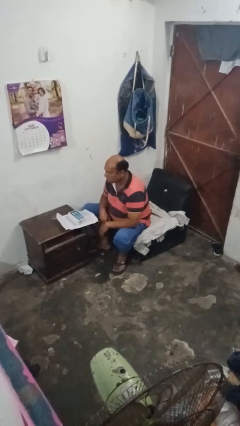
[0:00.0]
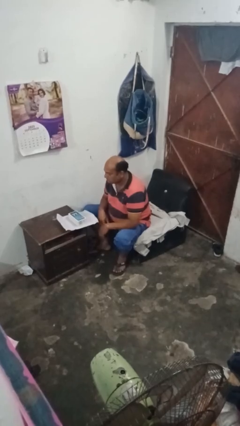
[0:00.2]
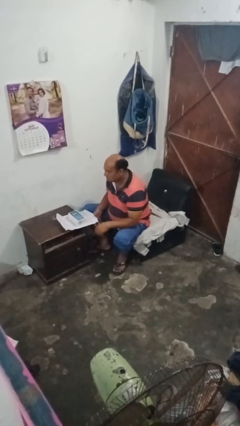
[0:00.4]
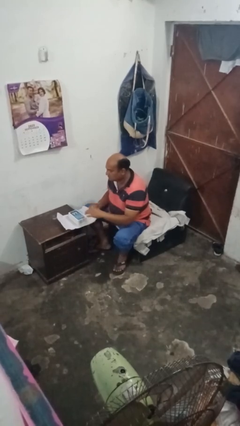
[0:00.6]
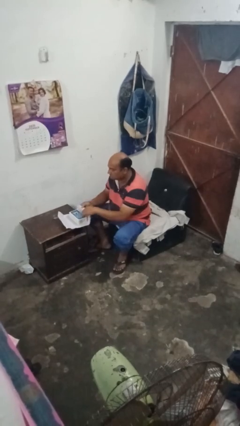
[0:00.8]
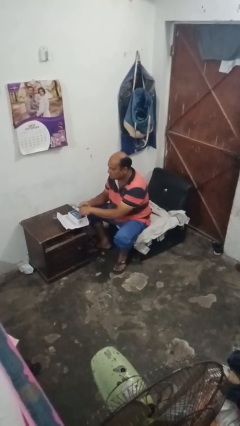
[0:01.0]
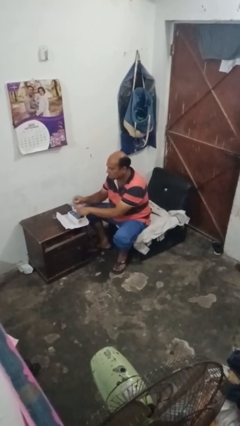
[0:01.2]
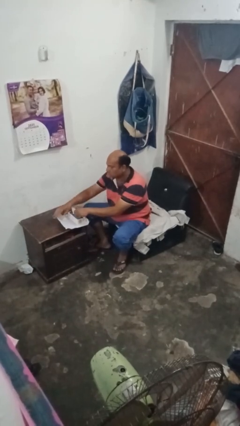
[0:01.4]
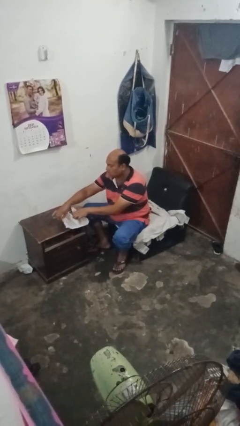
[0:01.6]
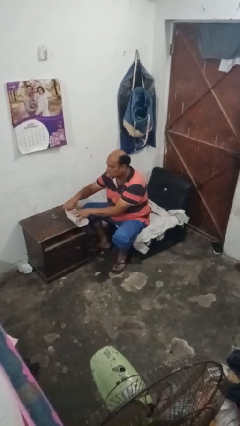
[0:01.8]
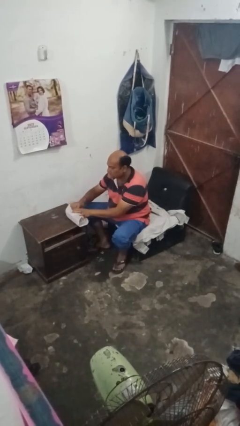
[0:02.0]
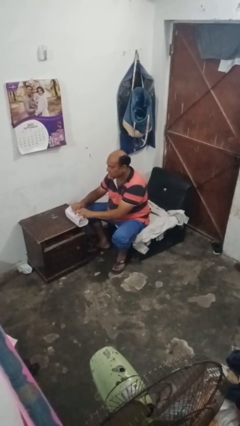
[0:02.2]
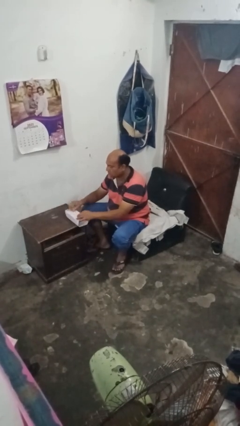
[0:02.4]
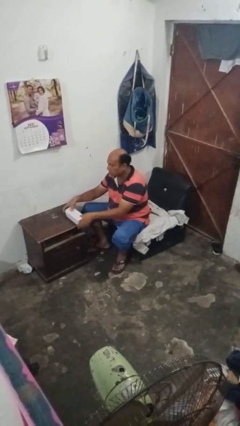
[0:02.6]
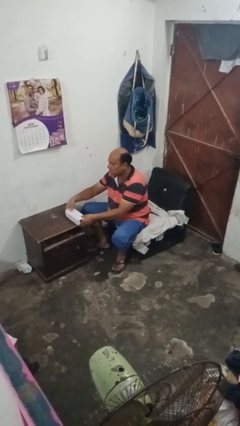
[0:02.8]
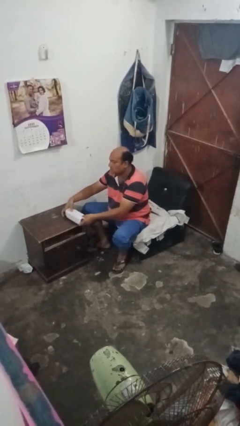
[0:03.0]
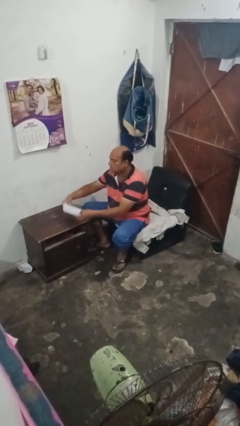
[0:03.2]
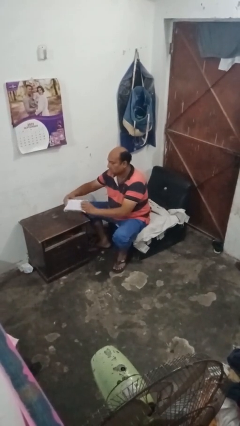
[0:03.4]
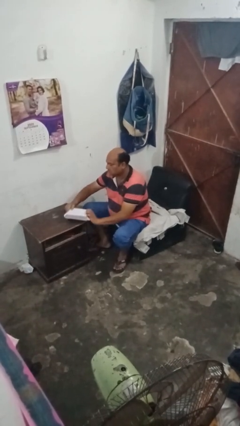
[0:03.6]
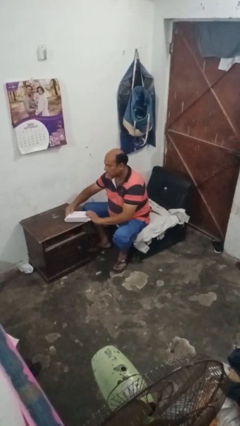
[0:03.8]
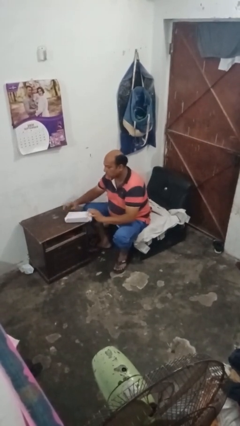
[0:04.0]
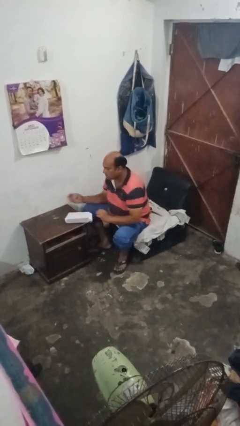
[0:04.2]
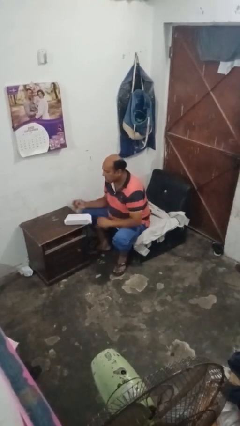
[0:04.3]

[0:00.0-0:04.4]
person wraps box

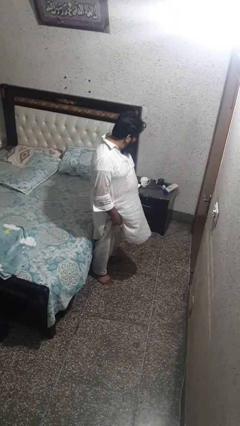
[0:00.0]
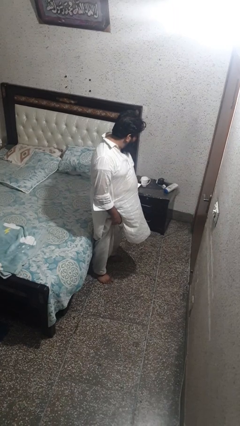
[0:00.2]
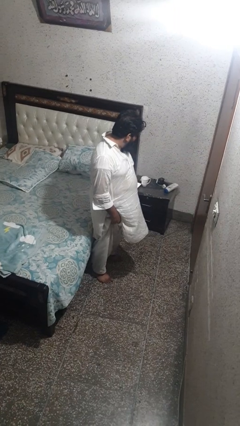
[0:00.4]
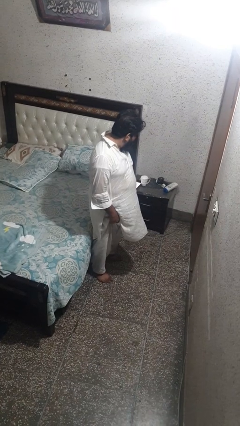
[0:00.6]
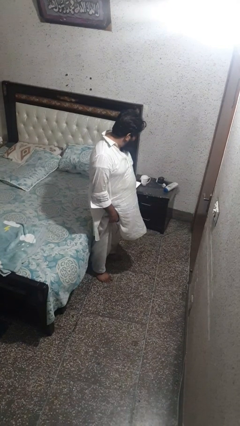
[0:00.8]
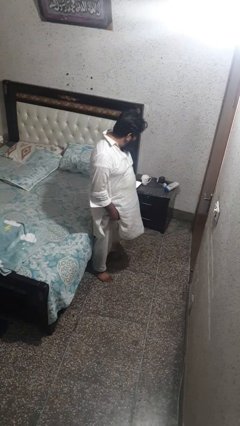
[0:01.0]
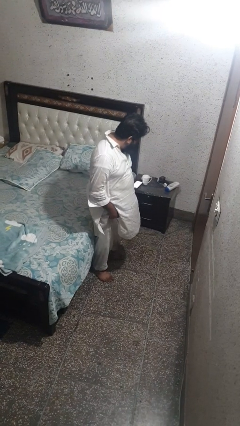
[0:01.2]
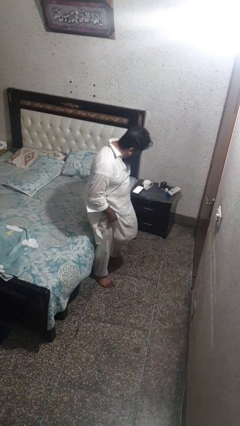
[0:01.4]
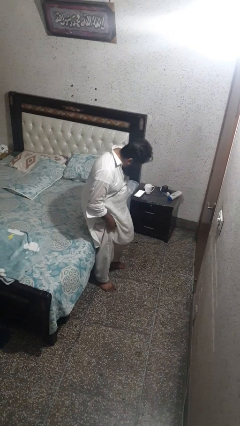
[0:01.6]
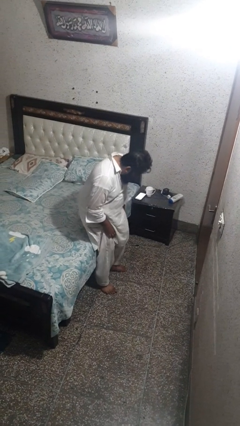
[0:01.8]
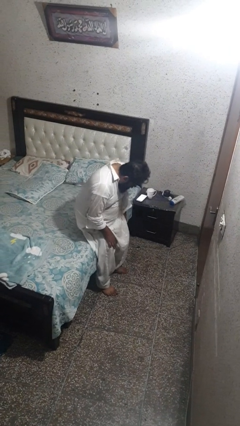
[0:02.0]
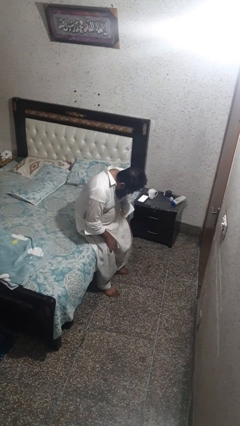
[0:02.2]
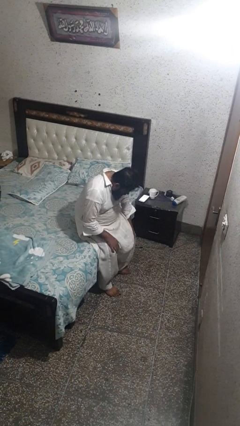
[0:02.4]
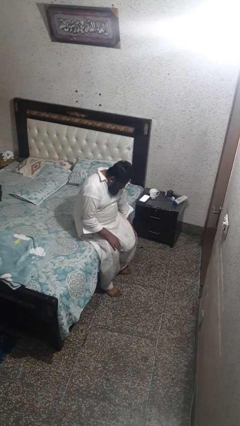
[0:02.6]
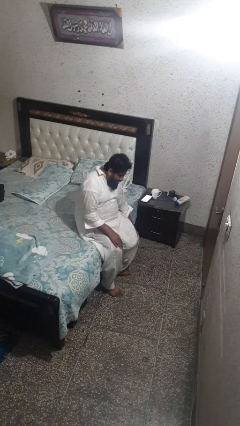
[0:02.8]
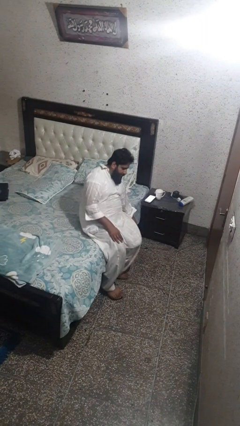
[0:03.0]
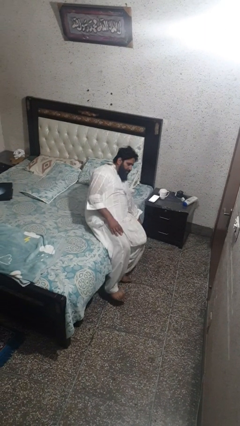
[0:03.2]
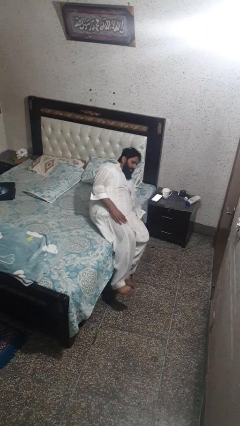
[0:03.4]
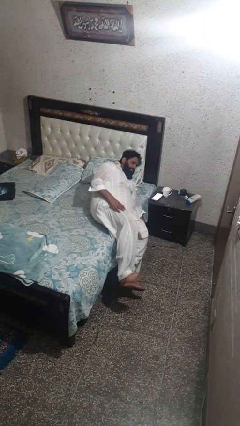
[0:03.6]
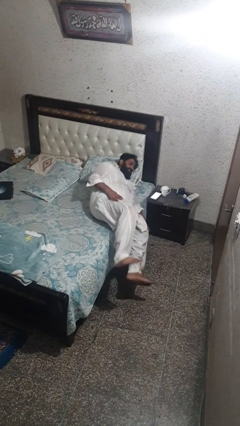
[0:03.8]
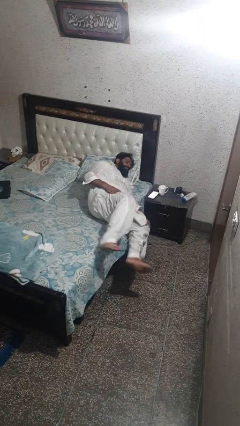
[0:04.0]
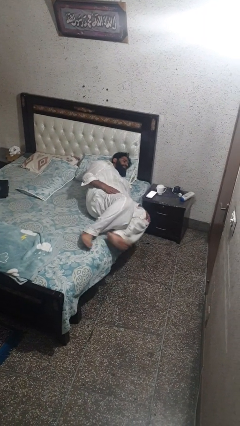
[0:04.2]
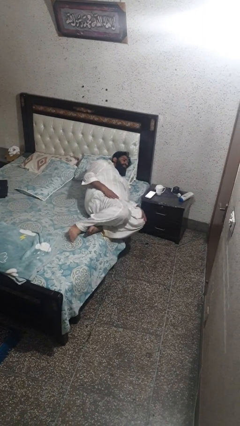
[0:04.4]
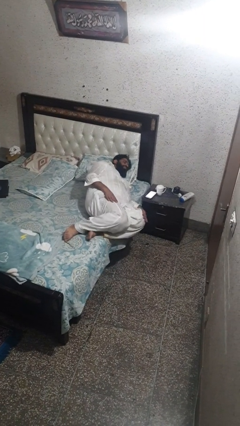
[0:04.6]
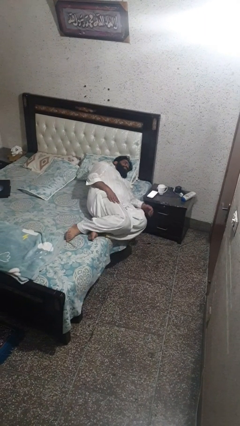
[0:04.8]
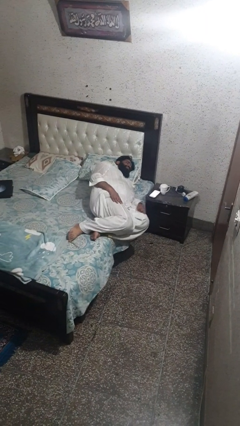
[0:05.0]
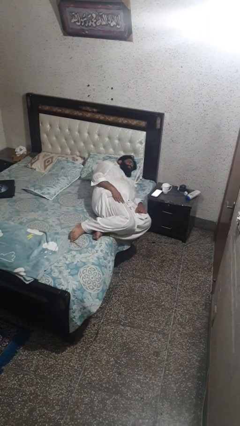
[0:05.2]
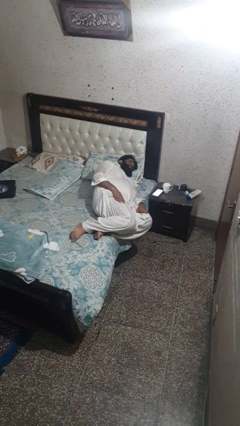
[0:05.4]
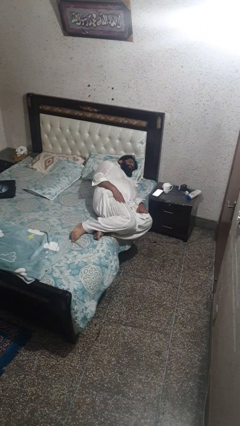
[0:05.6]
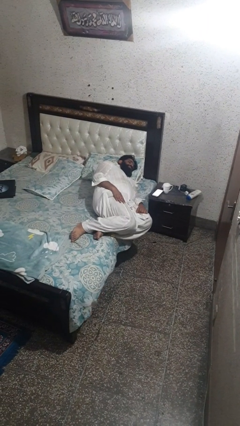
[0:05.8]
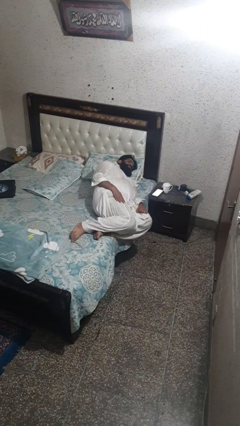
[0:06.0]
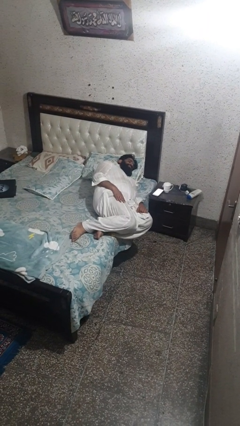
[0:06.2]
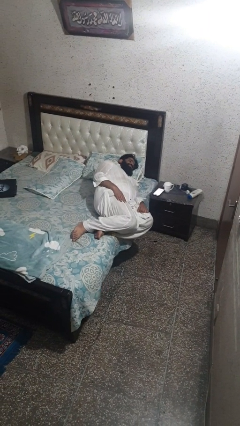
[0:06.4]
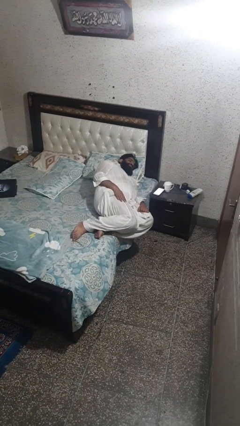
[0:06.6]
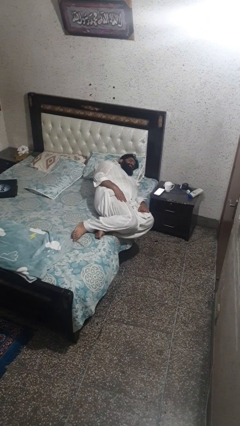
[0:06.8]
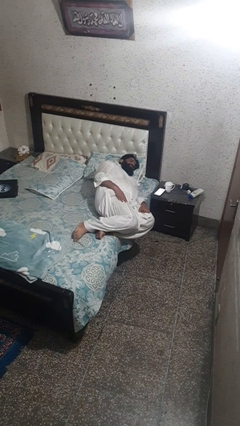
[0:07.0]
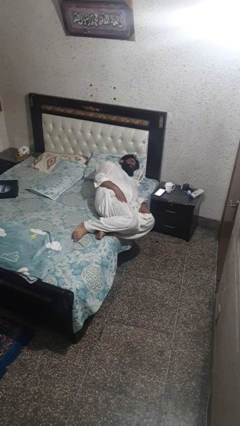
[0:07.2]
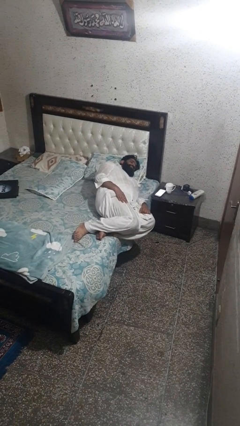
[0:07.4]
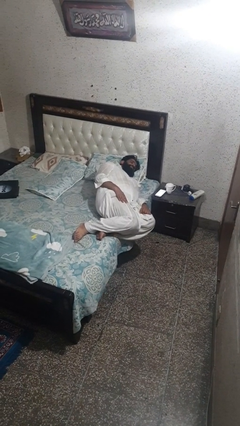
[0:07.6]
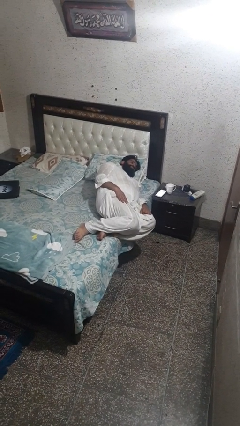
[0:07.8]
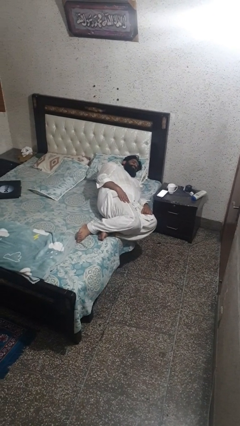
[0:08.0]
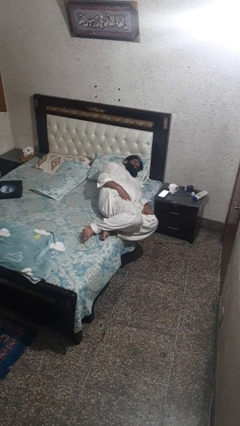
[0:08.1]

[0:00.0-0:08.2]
person lies down on bed

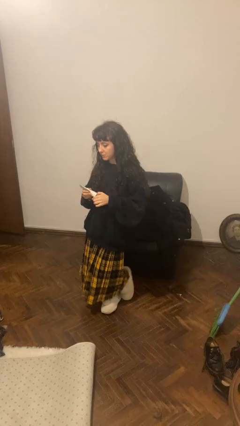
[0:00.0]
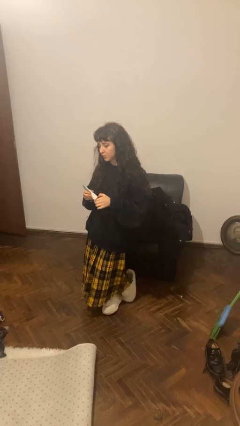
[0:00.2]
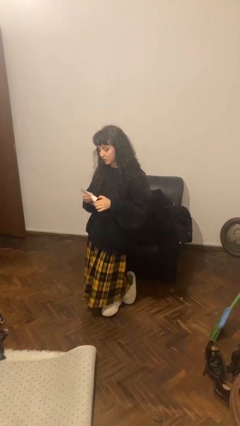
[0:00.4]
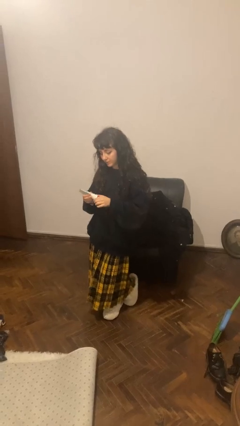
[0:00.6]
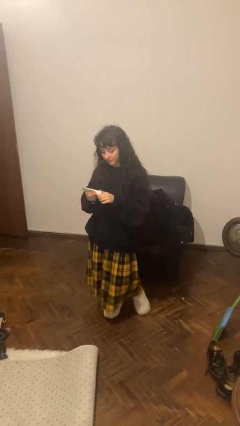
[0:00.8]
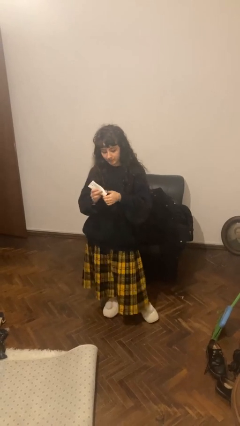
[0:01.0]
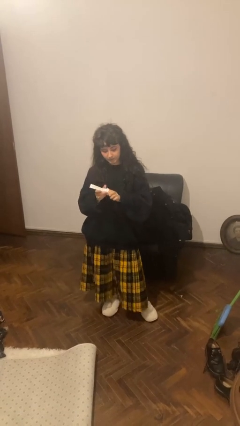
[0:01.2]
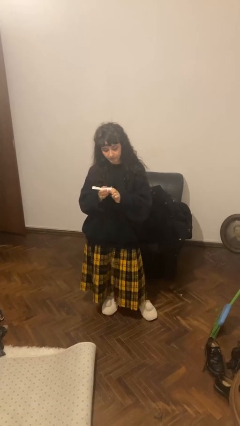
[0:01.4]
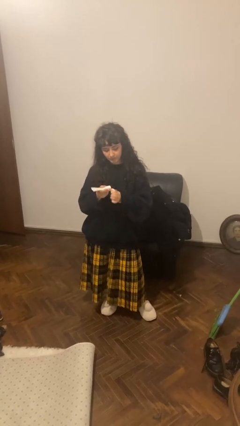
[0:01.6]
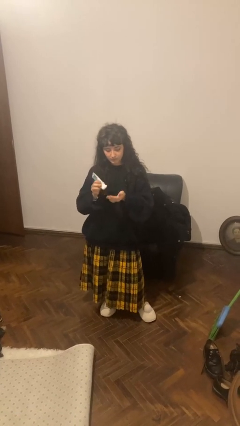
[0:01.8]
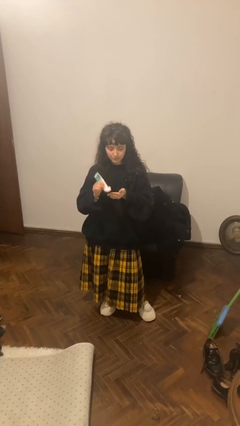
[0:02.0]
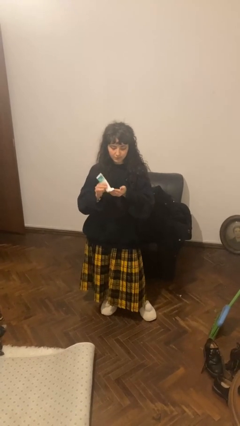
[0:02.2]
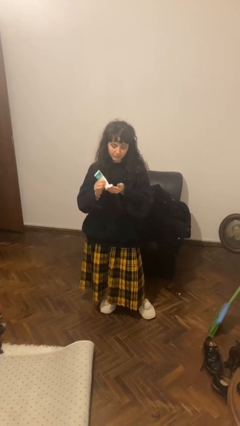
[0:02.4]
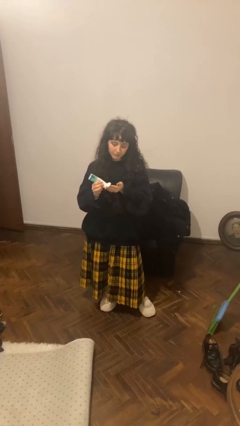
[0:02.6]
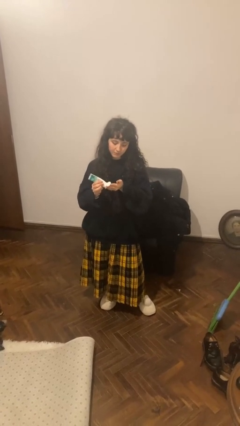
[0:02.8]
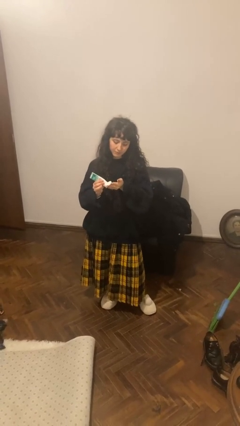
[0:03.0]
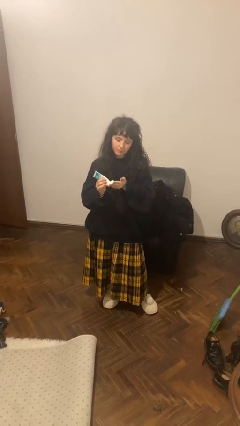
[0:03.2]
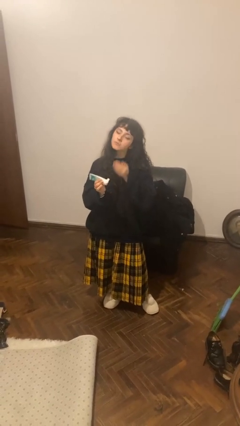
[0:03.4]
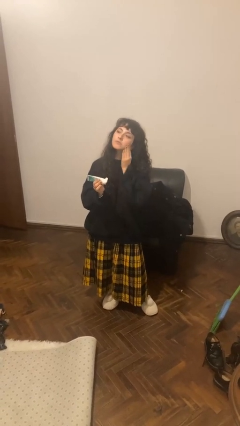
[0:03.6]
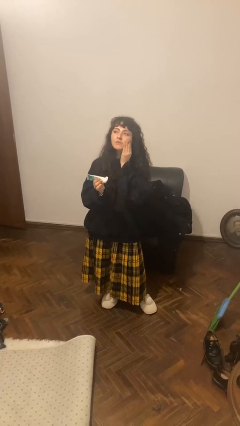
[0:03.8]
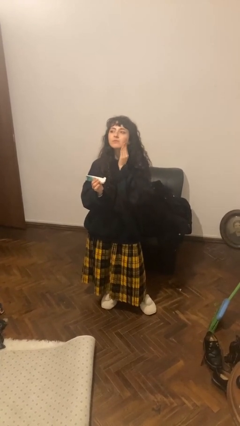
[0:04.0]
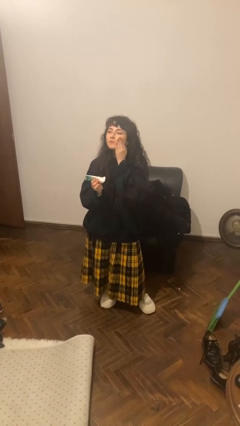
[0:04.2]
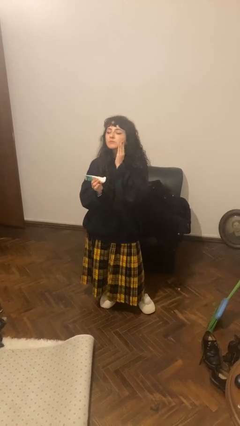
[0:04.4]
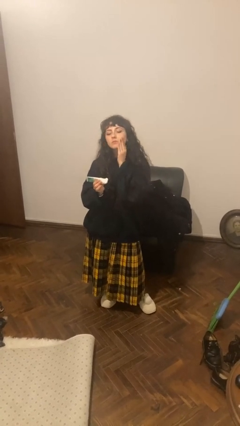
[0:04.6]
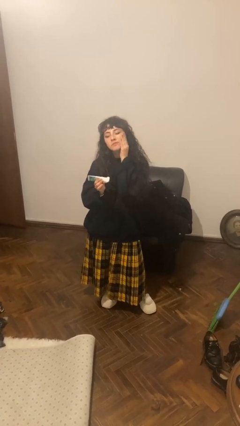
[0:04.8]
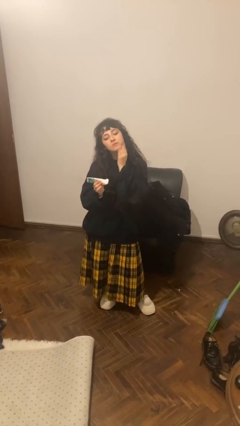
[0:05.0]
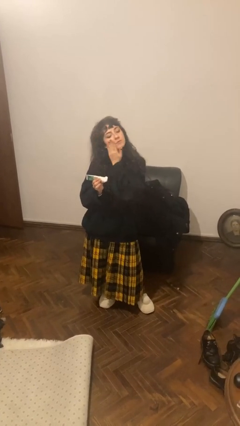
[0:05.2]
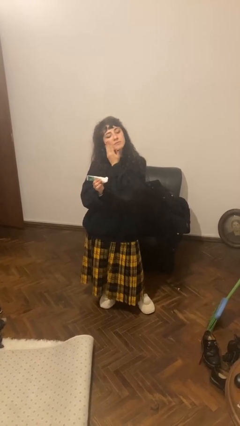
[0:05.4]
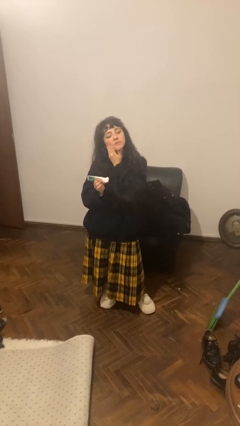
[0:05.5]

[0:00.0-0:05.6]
person applies facial moisturizer

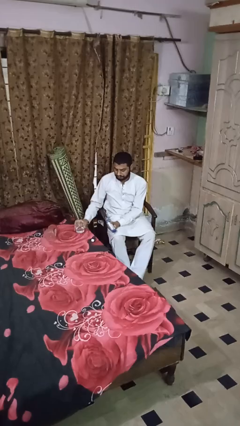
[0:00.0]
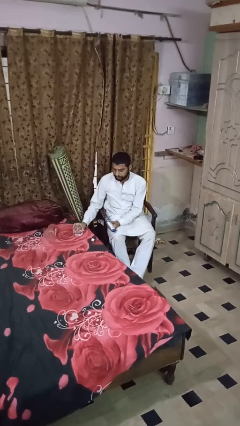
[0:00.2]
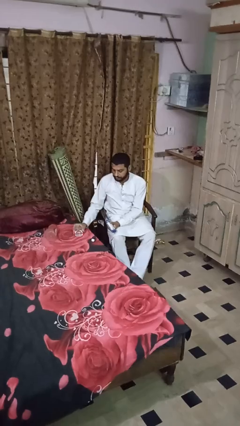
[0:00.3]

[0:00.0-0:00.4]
person takes medicine pills
